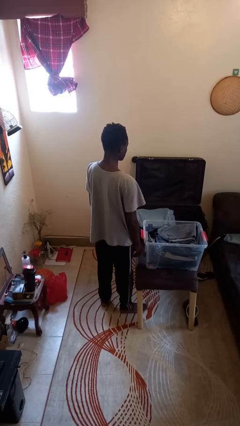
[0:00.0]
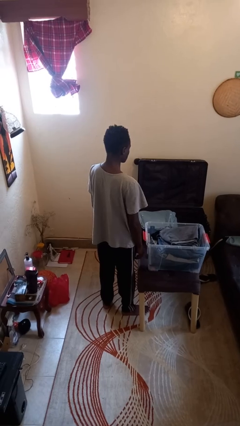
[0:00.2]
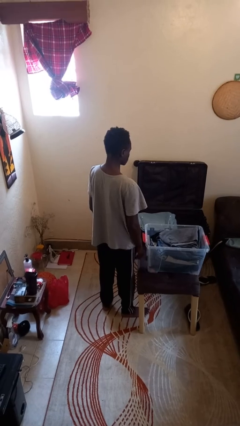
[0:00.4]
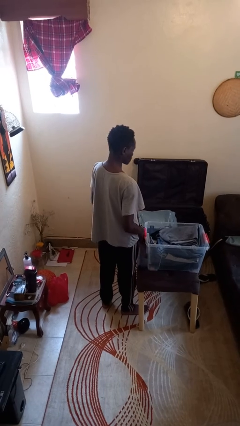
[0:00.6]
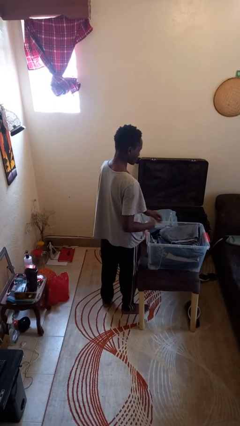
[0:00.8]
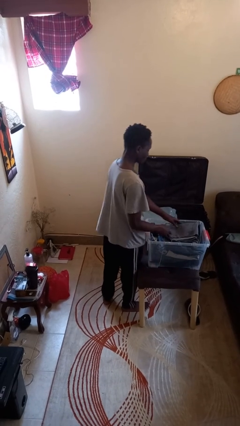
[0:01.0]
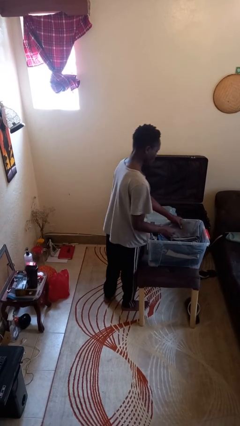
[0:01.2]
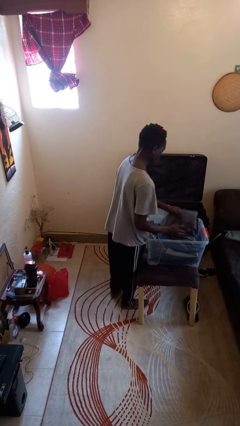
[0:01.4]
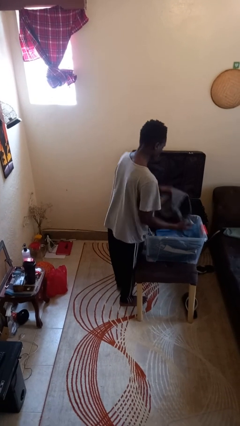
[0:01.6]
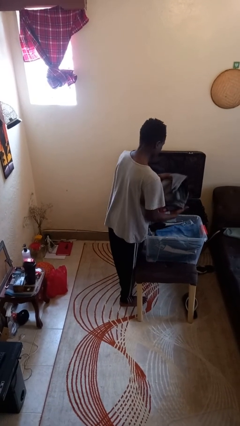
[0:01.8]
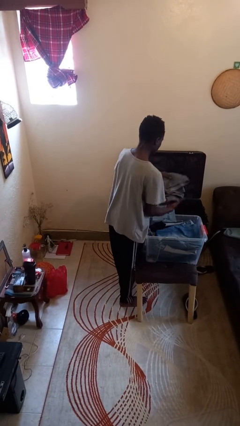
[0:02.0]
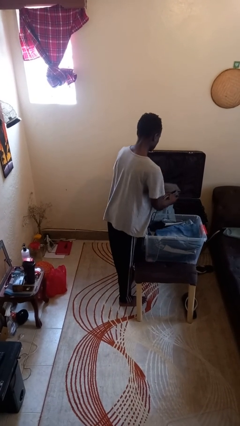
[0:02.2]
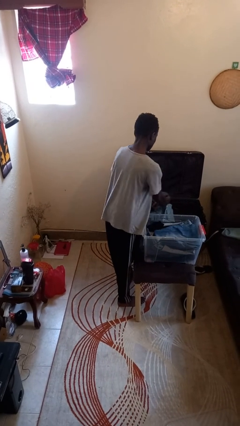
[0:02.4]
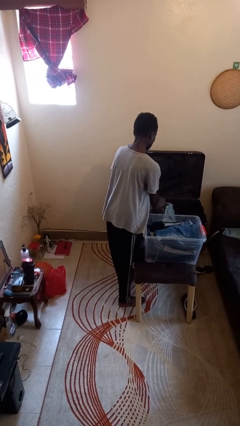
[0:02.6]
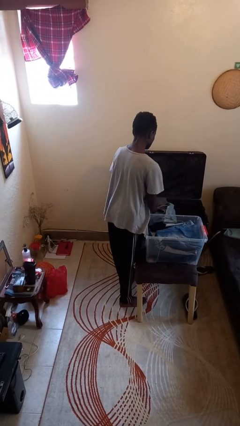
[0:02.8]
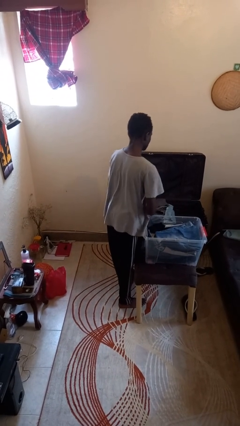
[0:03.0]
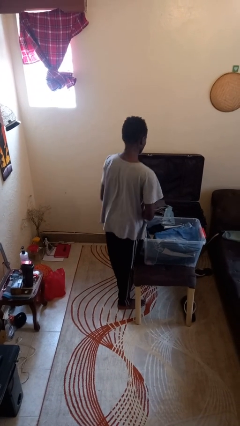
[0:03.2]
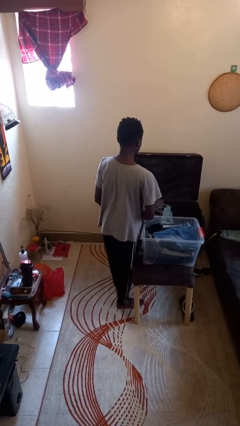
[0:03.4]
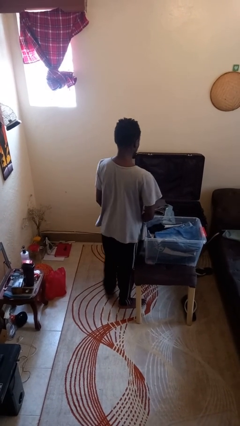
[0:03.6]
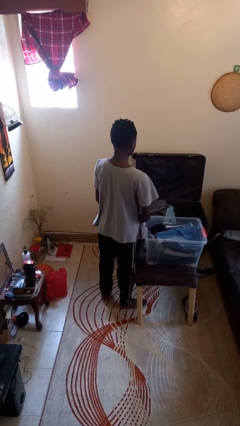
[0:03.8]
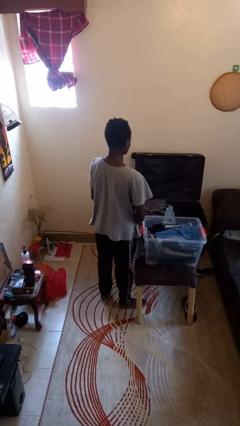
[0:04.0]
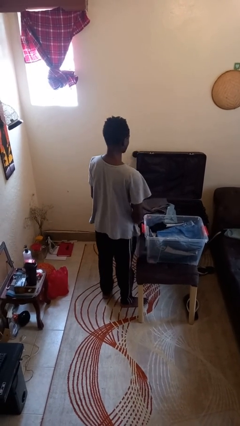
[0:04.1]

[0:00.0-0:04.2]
person loads clothes into suitcase

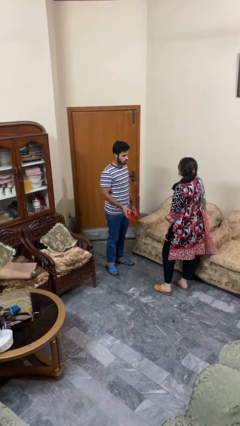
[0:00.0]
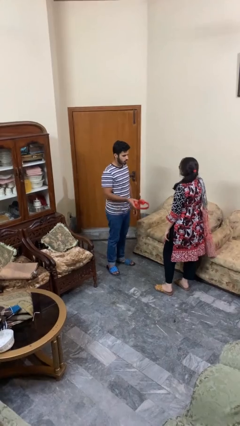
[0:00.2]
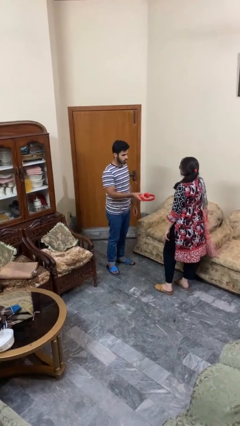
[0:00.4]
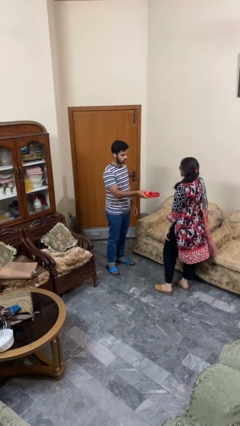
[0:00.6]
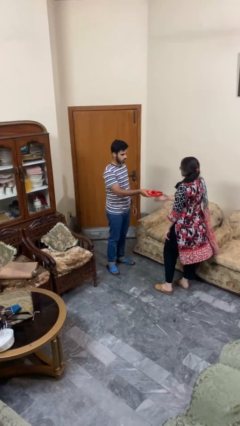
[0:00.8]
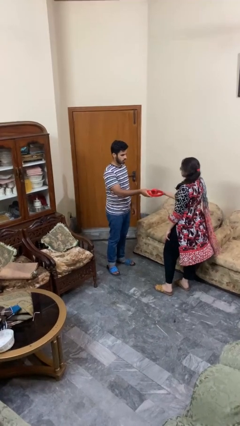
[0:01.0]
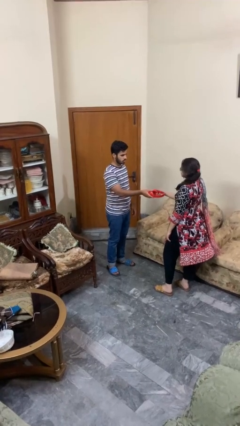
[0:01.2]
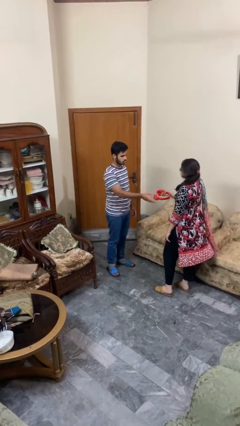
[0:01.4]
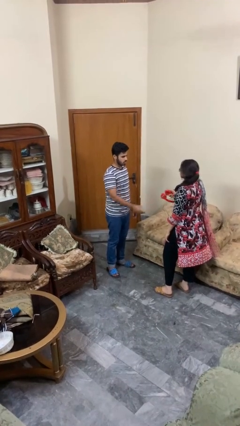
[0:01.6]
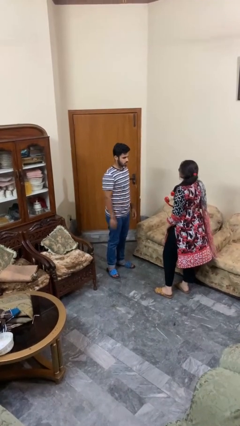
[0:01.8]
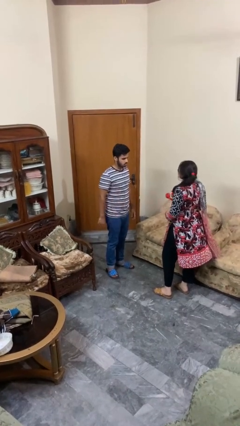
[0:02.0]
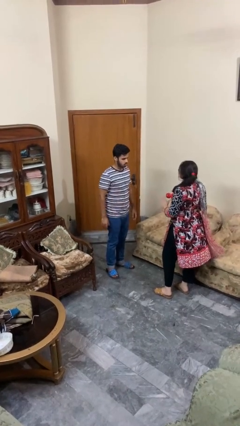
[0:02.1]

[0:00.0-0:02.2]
person transfers object to person

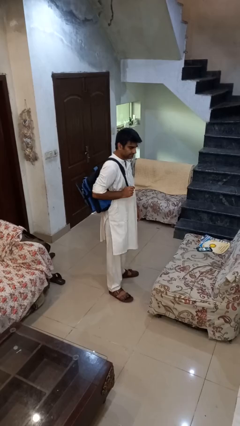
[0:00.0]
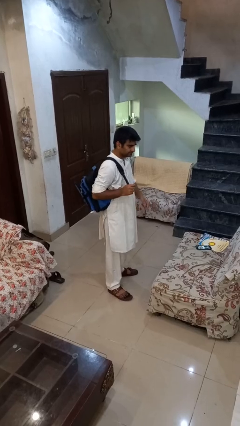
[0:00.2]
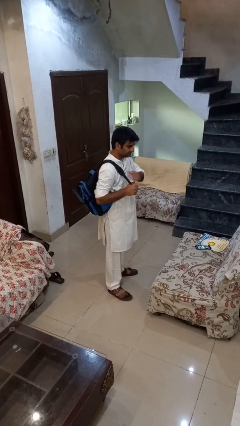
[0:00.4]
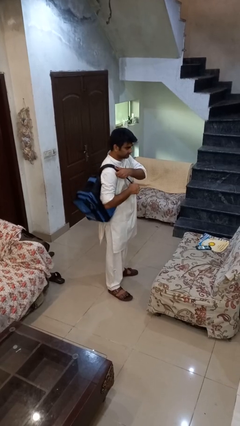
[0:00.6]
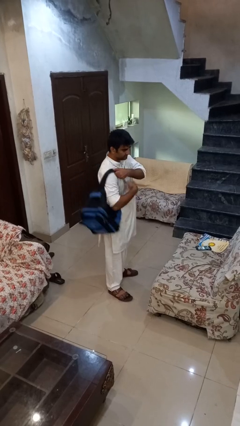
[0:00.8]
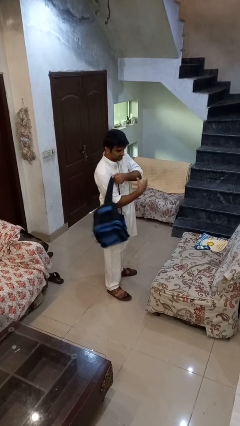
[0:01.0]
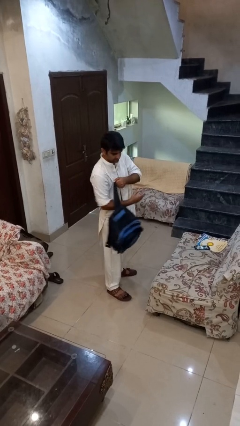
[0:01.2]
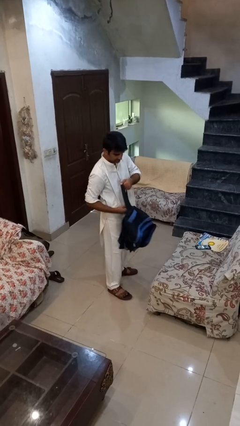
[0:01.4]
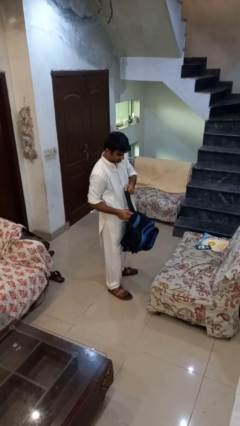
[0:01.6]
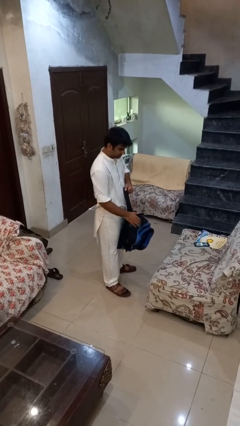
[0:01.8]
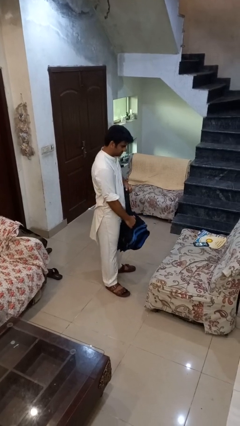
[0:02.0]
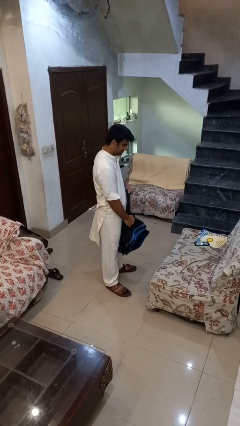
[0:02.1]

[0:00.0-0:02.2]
person takes off backpack

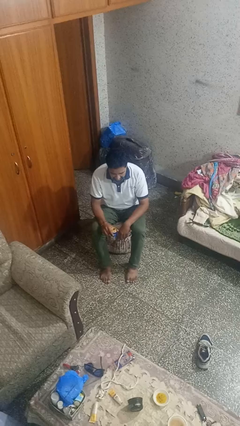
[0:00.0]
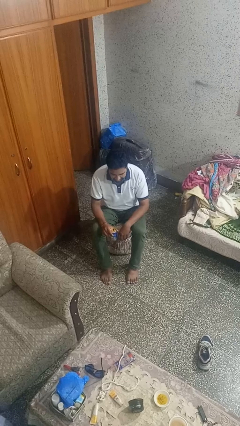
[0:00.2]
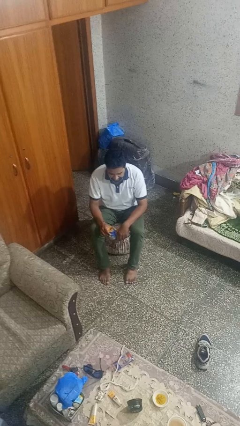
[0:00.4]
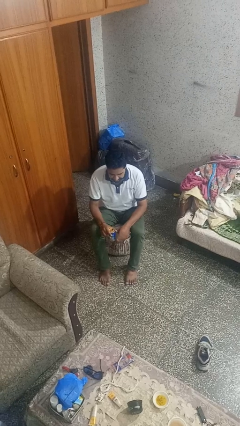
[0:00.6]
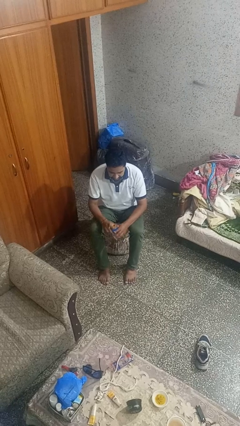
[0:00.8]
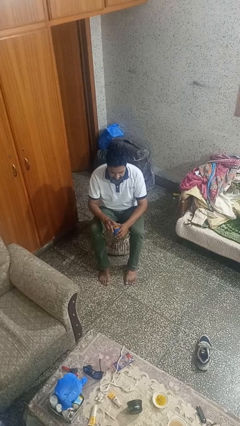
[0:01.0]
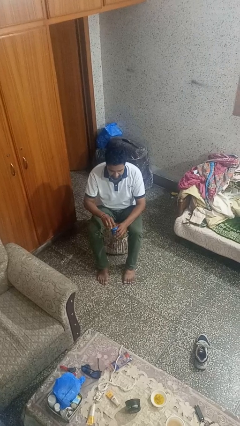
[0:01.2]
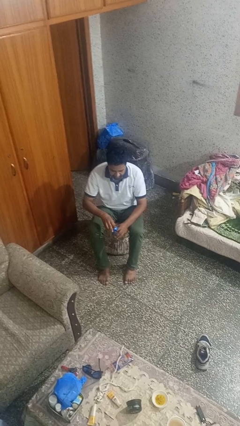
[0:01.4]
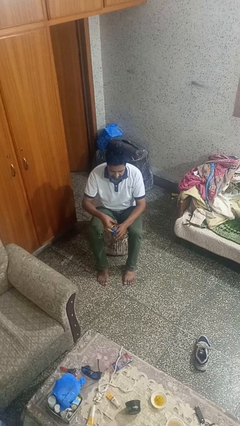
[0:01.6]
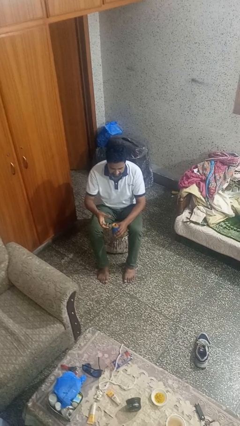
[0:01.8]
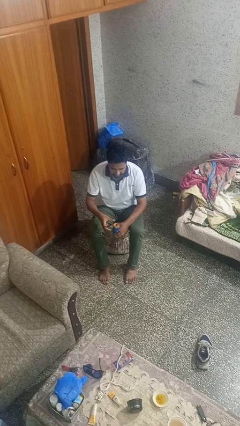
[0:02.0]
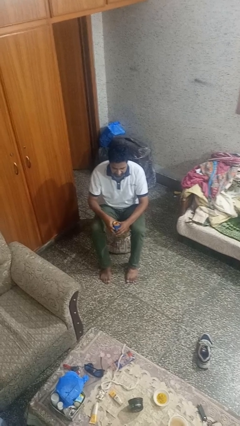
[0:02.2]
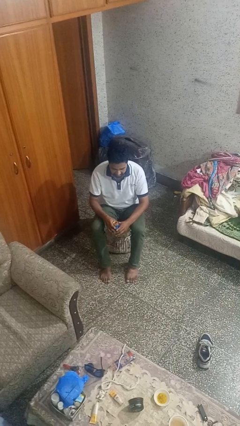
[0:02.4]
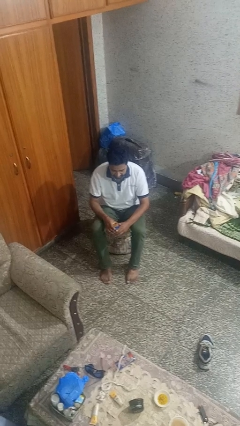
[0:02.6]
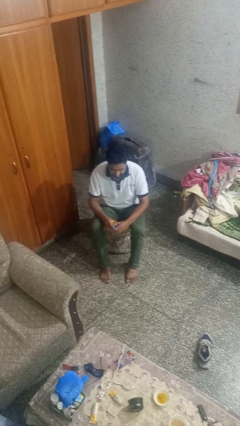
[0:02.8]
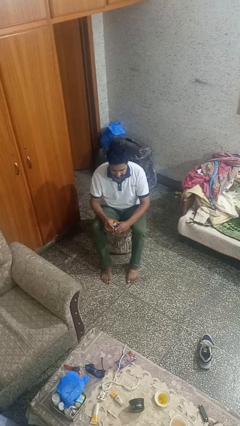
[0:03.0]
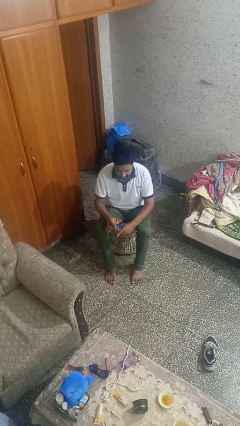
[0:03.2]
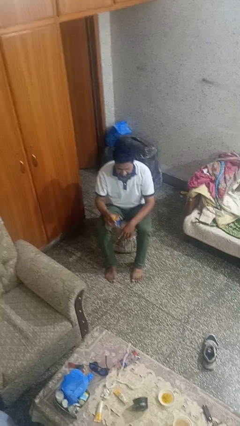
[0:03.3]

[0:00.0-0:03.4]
person opens beverage can

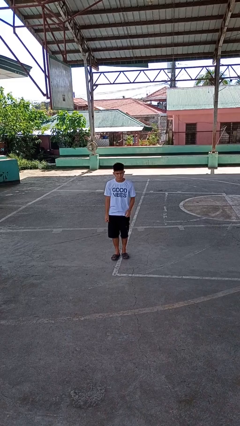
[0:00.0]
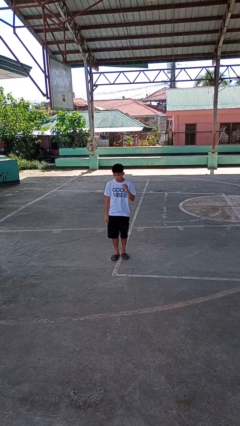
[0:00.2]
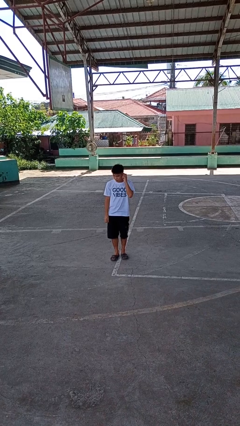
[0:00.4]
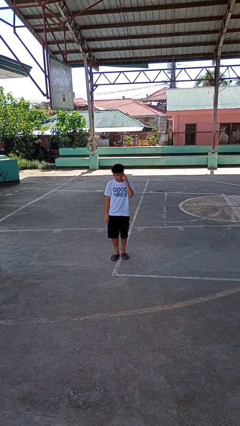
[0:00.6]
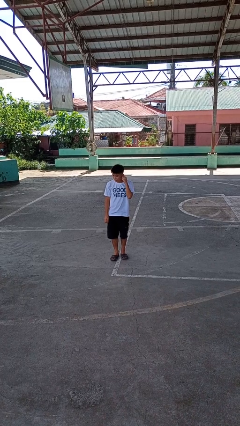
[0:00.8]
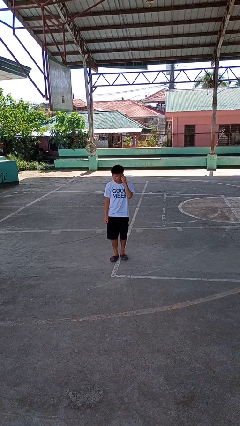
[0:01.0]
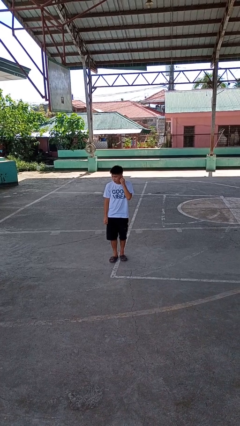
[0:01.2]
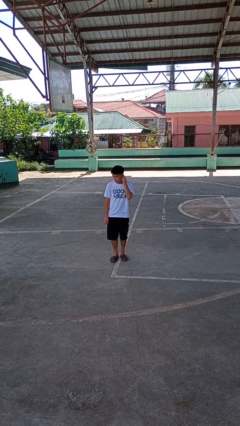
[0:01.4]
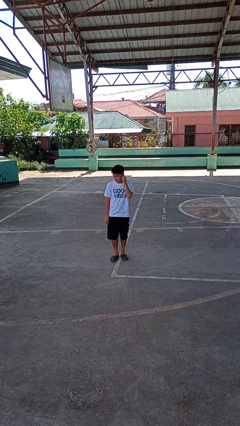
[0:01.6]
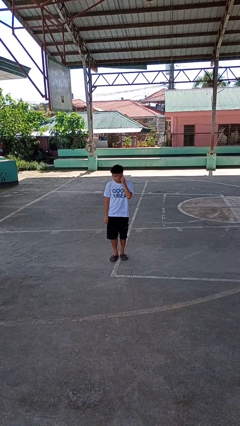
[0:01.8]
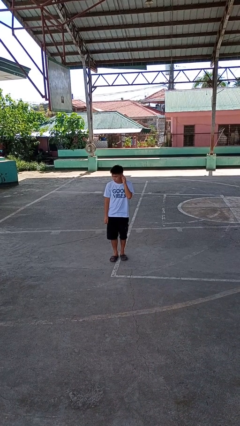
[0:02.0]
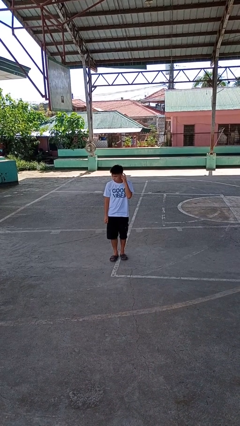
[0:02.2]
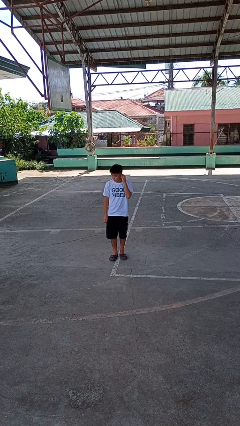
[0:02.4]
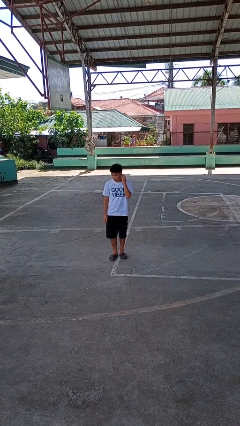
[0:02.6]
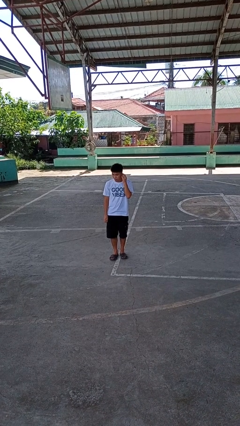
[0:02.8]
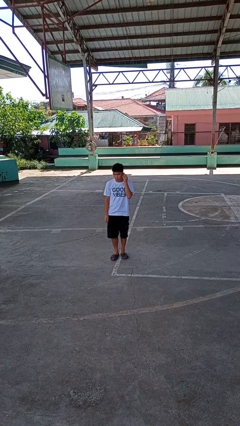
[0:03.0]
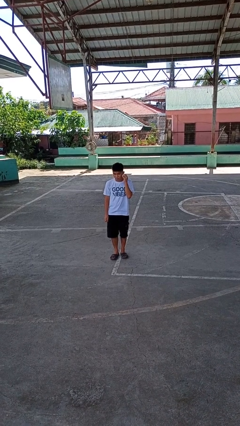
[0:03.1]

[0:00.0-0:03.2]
person touches earlobe

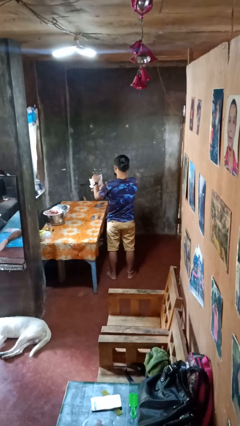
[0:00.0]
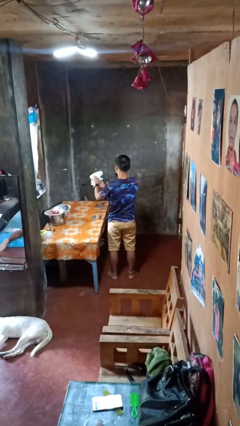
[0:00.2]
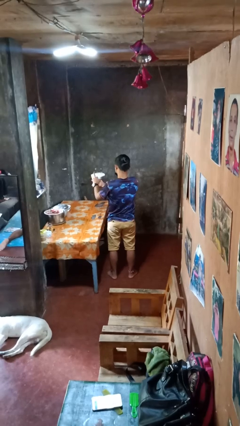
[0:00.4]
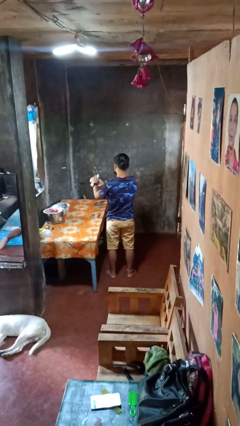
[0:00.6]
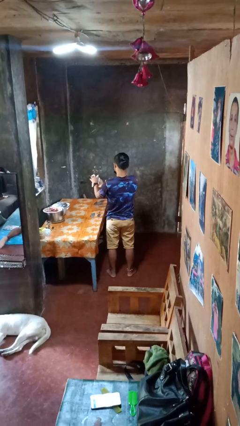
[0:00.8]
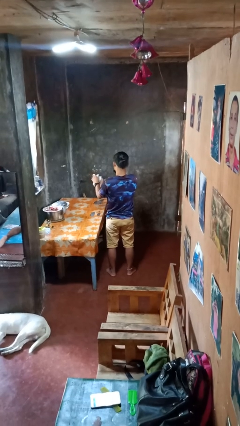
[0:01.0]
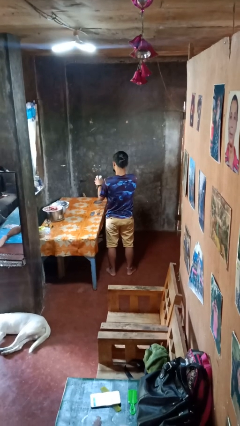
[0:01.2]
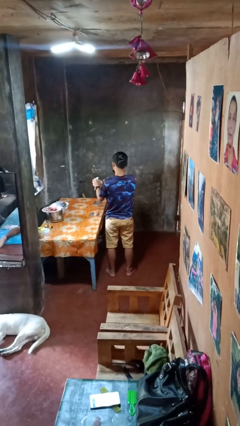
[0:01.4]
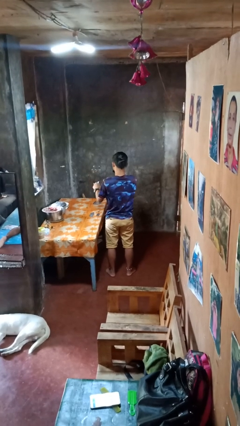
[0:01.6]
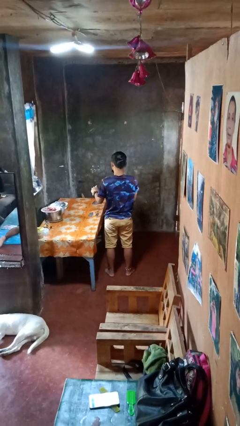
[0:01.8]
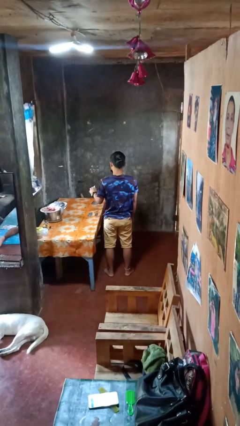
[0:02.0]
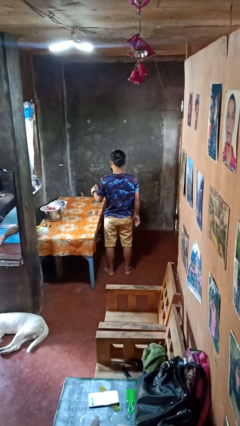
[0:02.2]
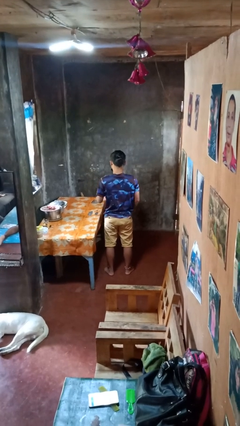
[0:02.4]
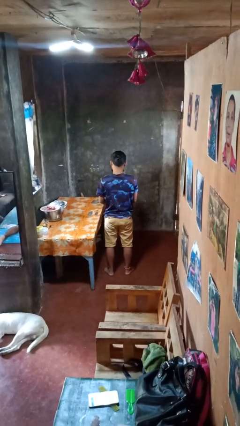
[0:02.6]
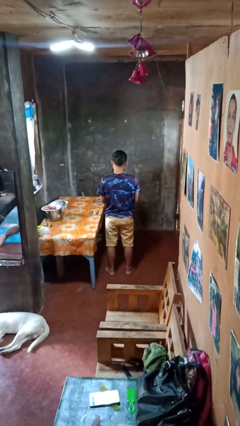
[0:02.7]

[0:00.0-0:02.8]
person crumples paper
